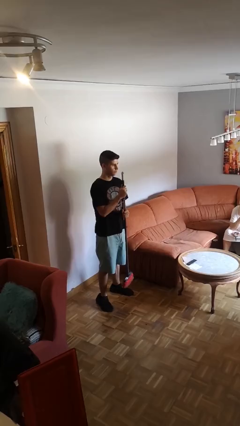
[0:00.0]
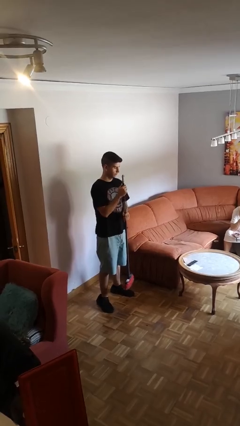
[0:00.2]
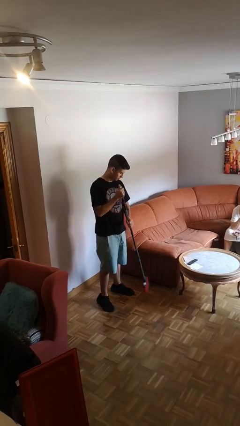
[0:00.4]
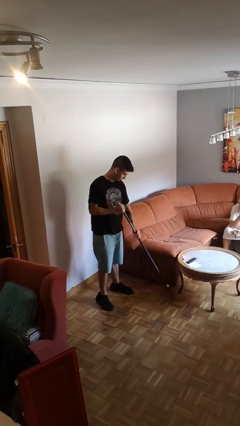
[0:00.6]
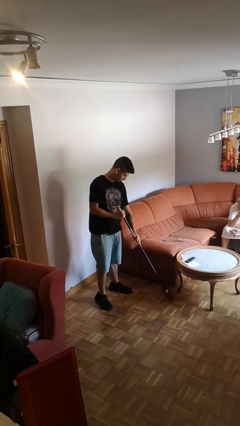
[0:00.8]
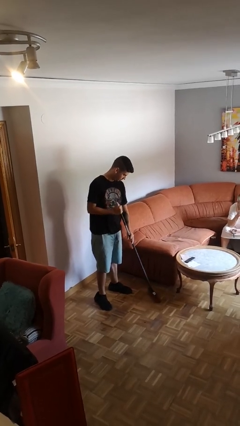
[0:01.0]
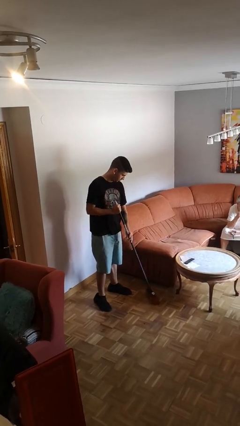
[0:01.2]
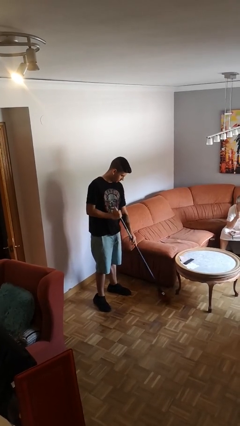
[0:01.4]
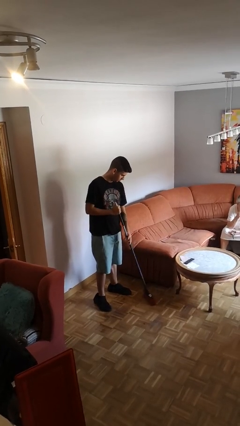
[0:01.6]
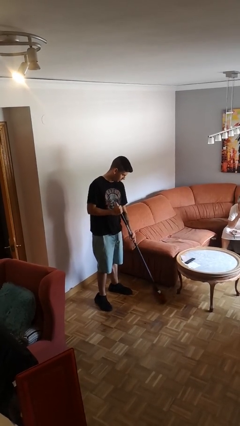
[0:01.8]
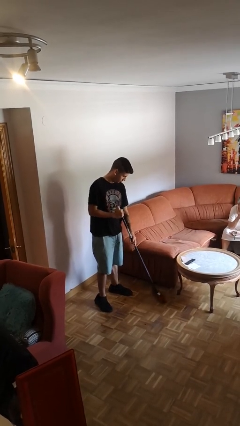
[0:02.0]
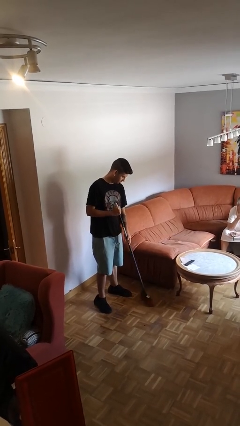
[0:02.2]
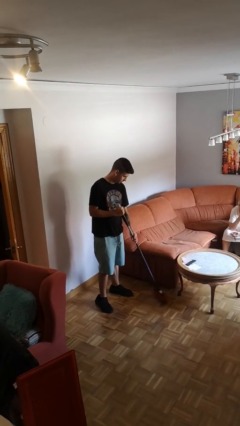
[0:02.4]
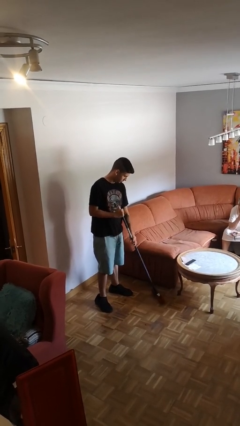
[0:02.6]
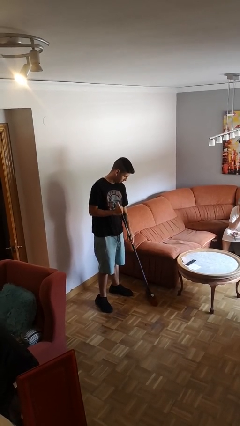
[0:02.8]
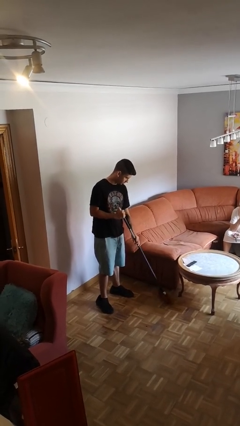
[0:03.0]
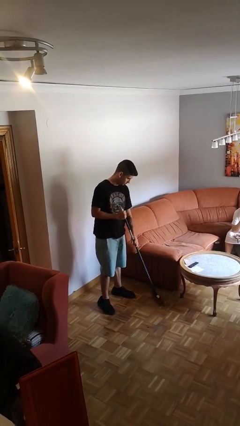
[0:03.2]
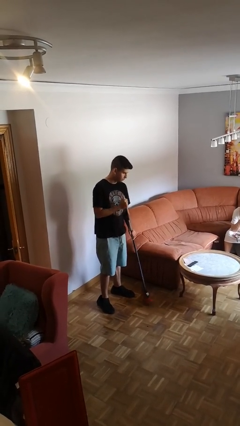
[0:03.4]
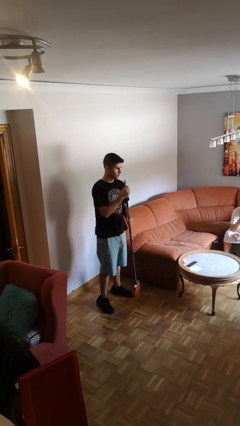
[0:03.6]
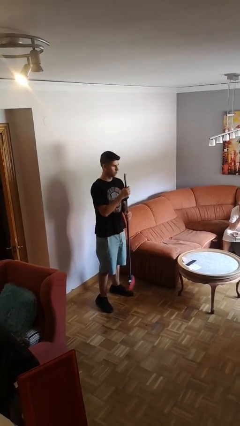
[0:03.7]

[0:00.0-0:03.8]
person sweeps floor

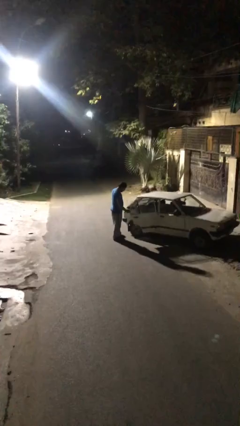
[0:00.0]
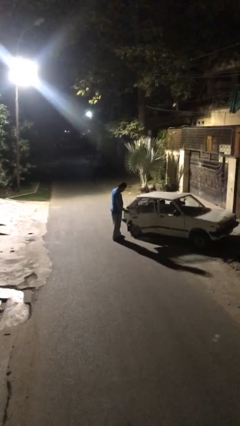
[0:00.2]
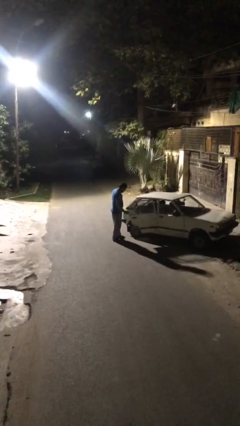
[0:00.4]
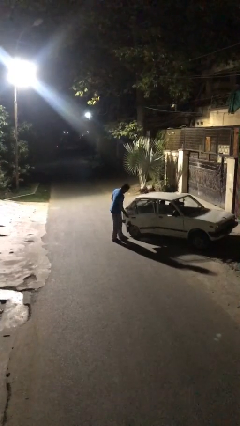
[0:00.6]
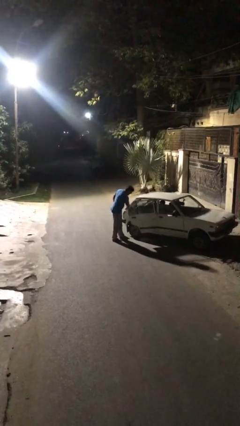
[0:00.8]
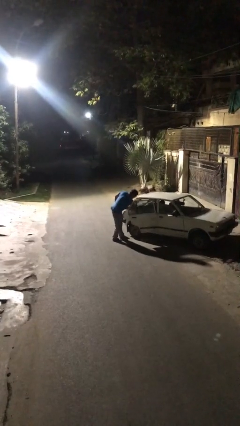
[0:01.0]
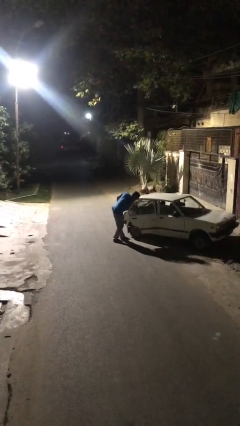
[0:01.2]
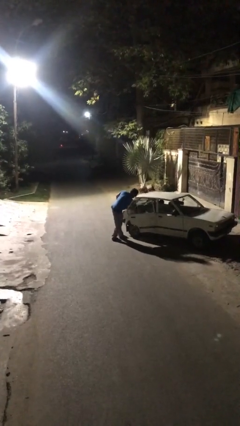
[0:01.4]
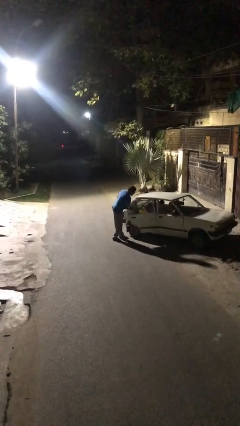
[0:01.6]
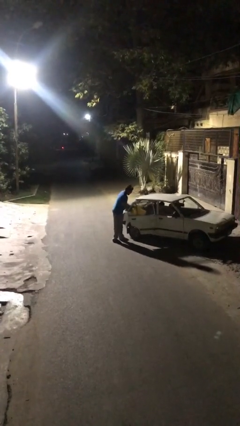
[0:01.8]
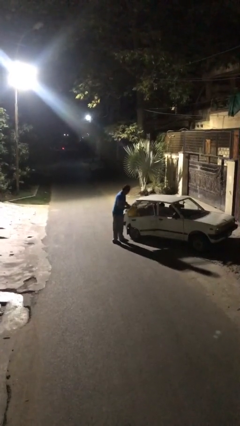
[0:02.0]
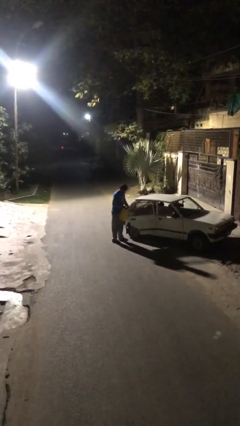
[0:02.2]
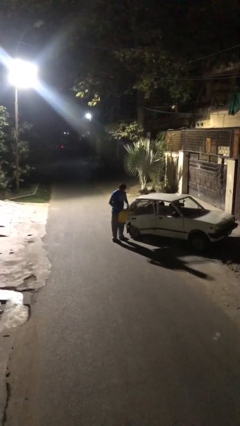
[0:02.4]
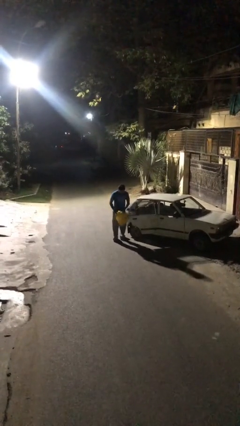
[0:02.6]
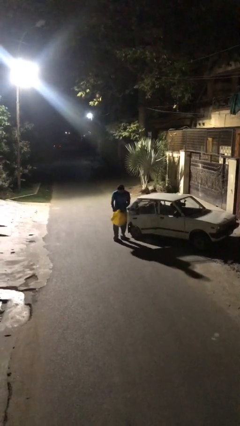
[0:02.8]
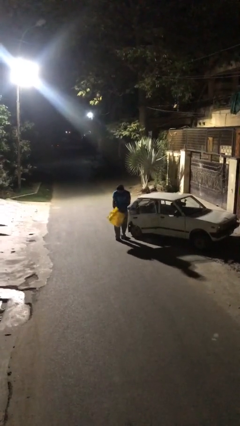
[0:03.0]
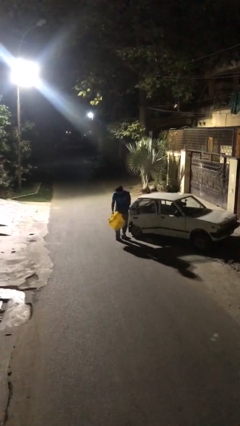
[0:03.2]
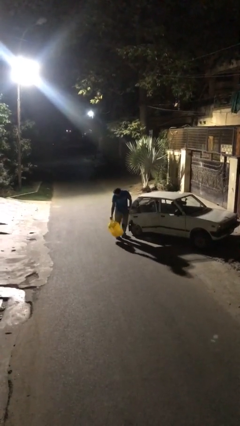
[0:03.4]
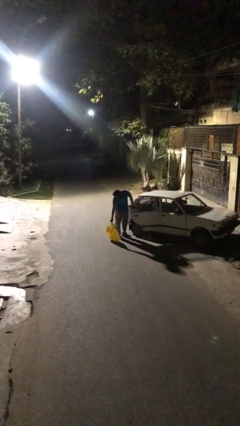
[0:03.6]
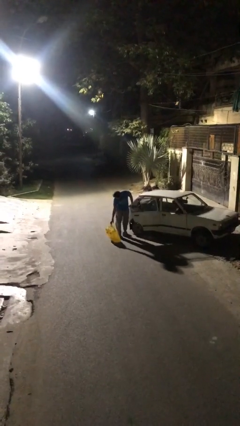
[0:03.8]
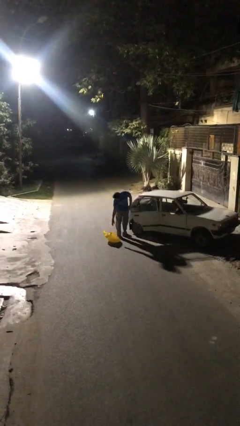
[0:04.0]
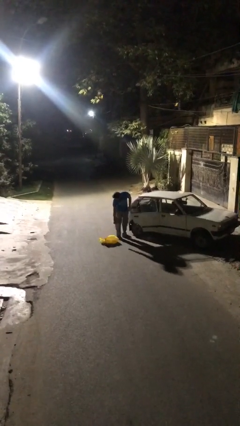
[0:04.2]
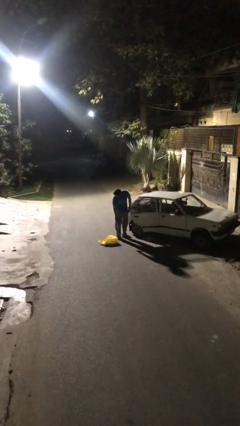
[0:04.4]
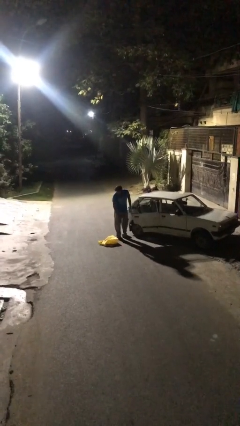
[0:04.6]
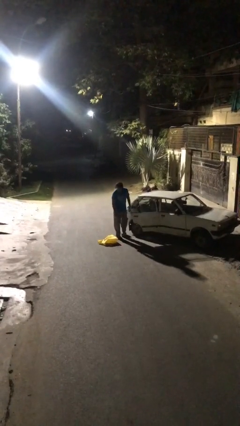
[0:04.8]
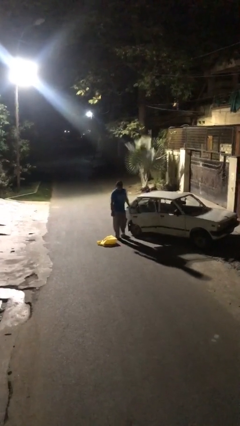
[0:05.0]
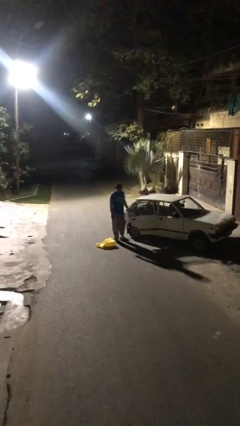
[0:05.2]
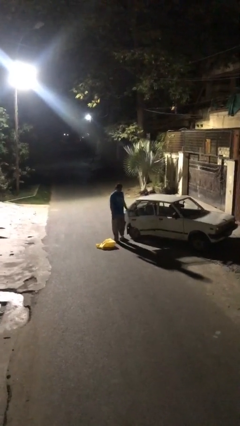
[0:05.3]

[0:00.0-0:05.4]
person unloads car

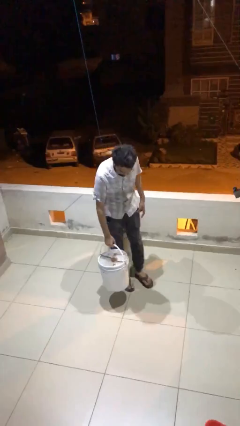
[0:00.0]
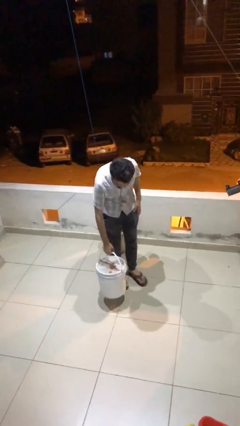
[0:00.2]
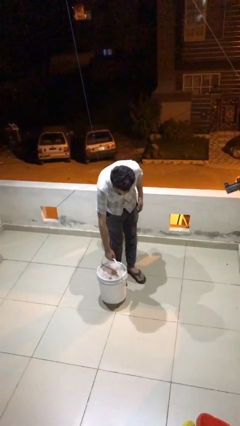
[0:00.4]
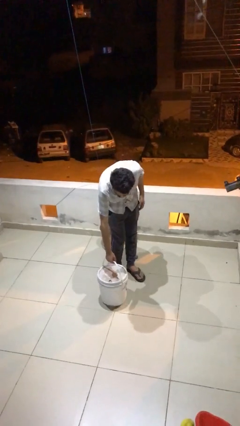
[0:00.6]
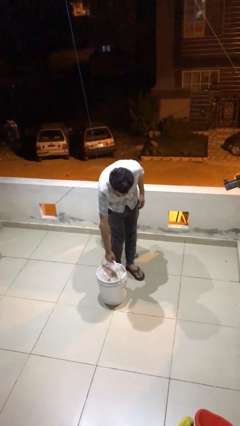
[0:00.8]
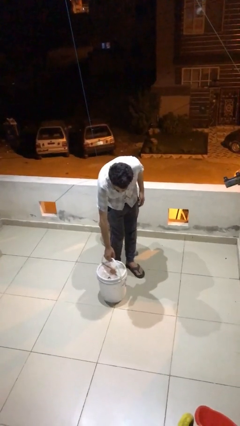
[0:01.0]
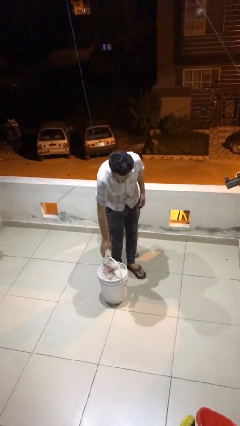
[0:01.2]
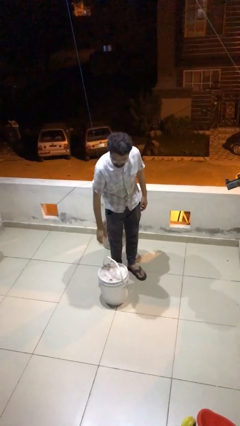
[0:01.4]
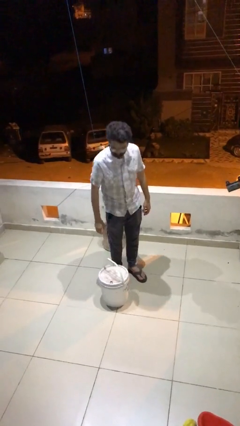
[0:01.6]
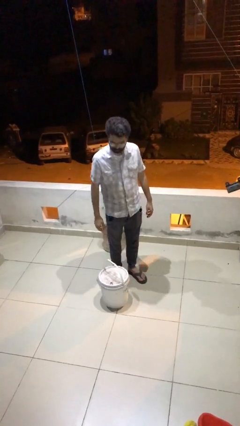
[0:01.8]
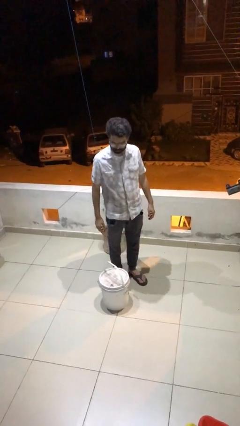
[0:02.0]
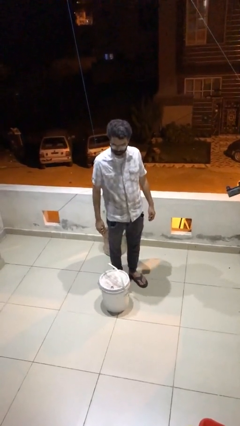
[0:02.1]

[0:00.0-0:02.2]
person puts down object on floor

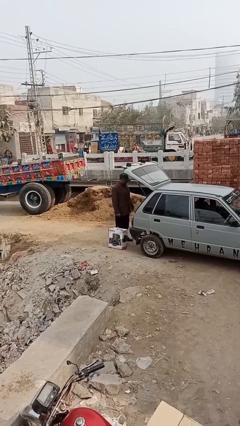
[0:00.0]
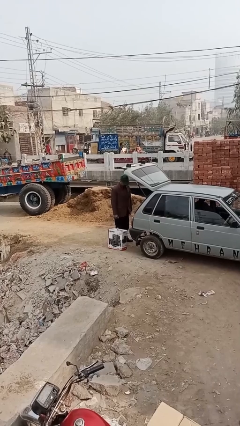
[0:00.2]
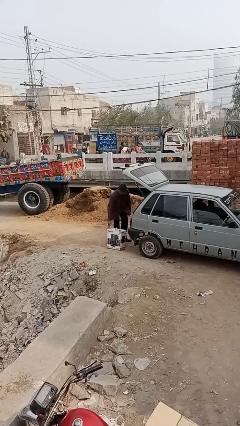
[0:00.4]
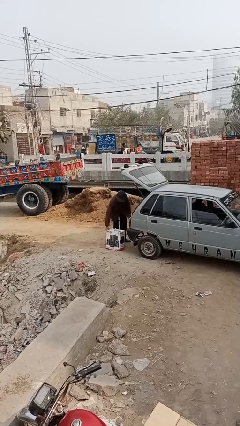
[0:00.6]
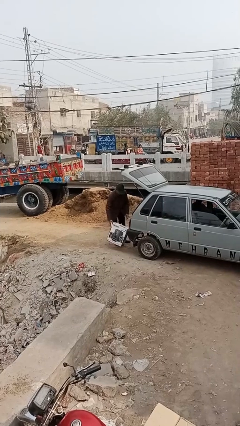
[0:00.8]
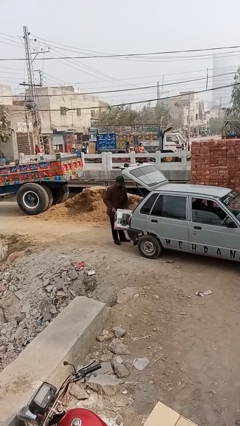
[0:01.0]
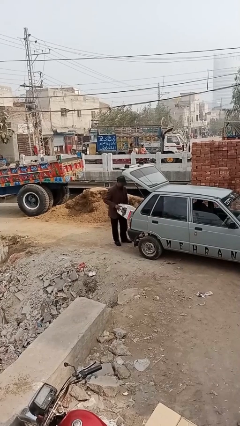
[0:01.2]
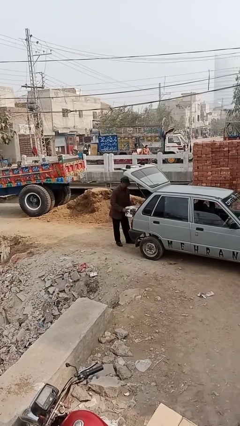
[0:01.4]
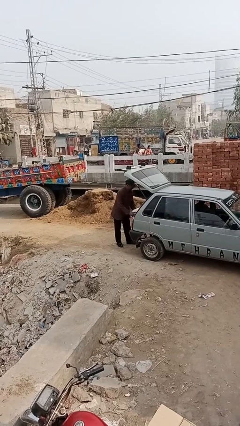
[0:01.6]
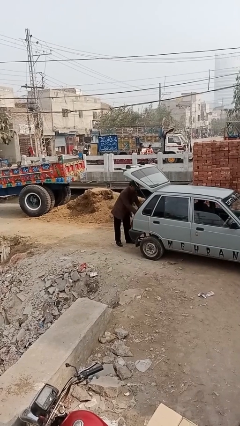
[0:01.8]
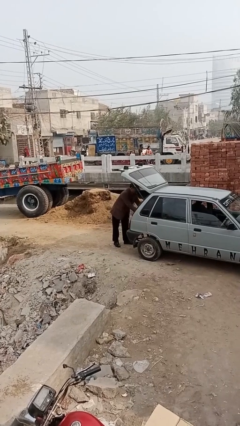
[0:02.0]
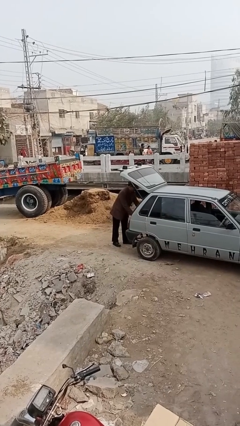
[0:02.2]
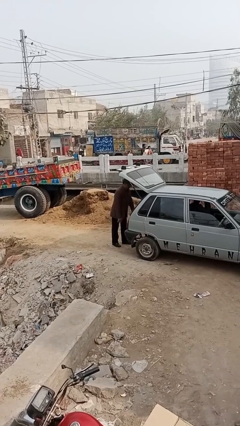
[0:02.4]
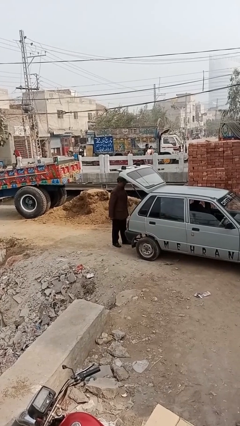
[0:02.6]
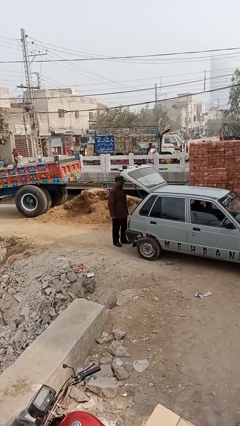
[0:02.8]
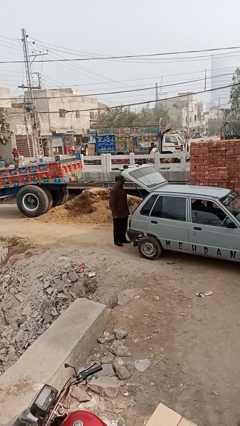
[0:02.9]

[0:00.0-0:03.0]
person loads car

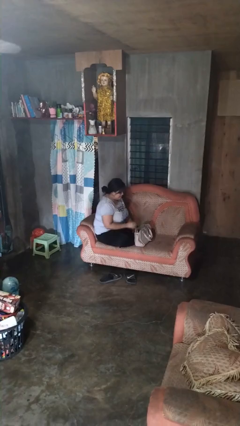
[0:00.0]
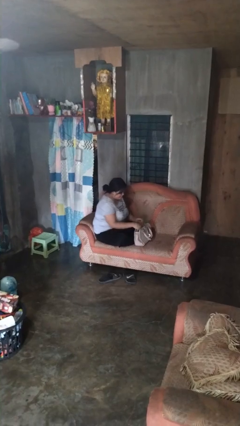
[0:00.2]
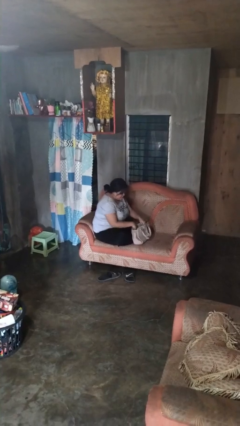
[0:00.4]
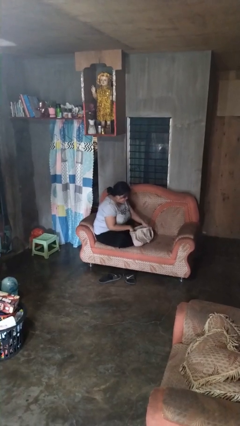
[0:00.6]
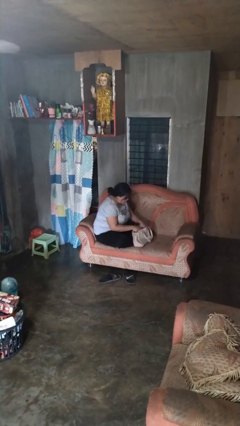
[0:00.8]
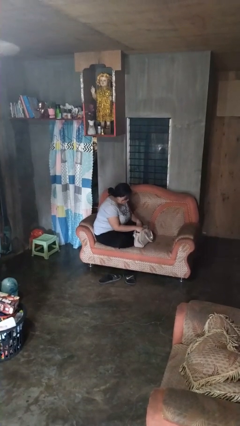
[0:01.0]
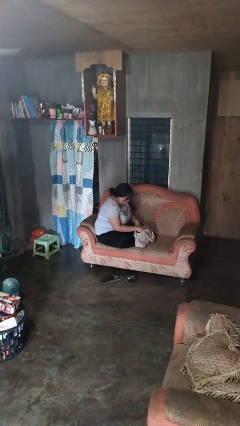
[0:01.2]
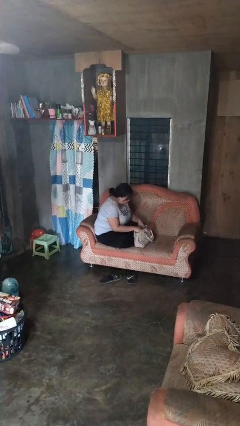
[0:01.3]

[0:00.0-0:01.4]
person searches in purse

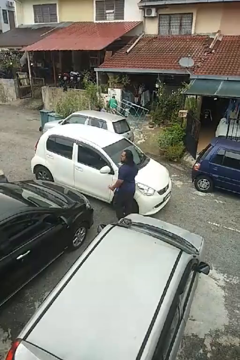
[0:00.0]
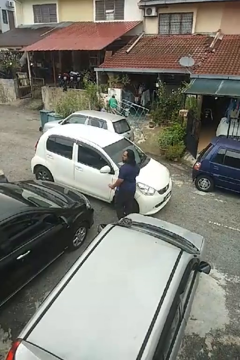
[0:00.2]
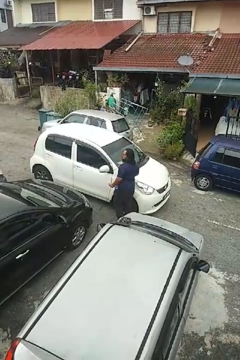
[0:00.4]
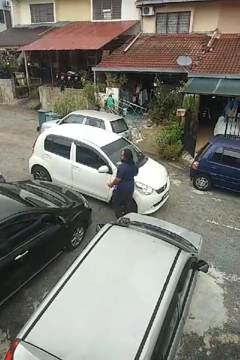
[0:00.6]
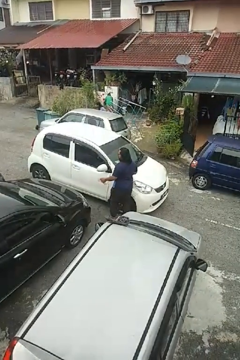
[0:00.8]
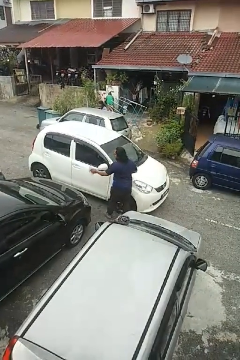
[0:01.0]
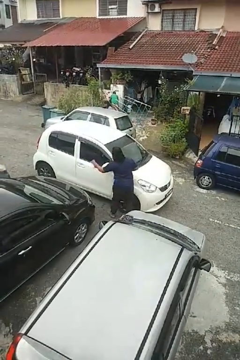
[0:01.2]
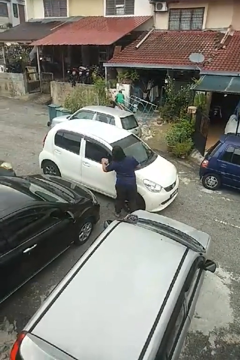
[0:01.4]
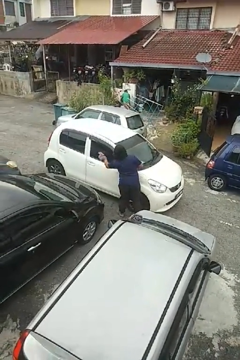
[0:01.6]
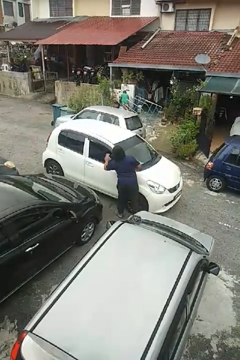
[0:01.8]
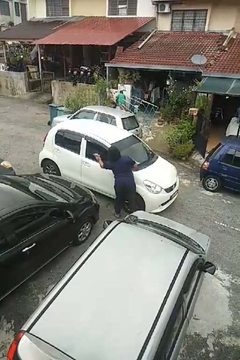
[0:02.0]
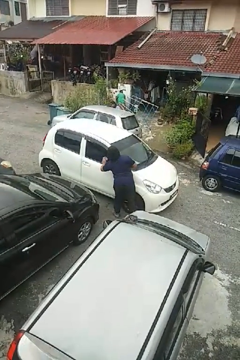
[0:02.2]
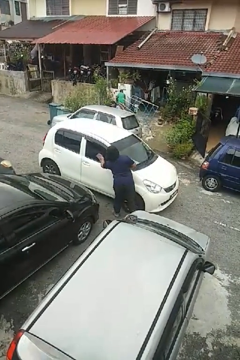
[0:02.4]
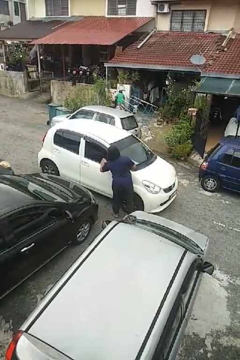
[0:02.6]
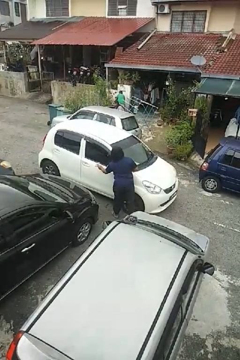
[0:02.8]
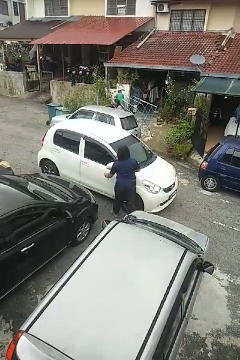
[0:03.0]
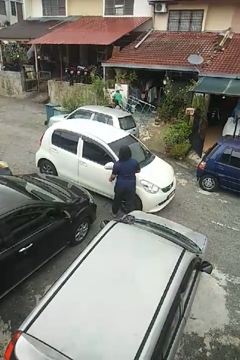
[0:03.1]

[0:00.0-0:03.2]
person polishes car with rag
